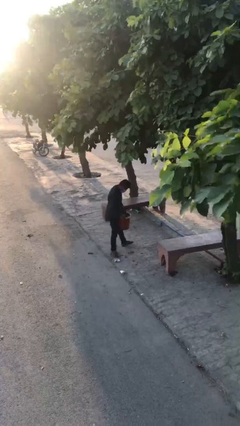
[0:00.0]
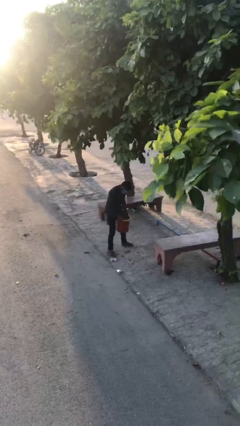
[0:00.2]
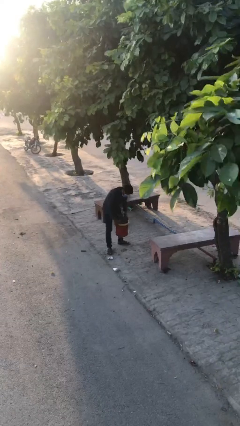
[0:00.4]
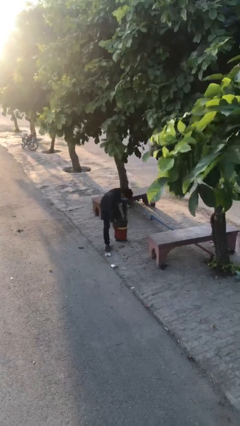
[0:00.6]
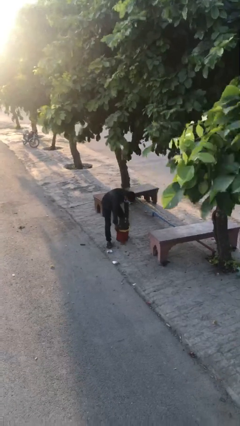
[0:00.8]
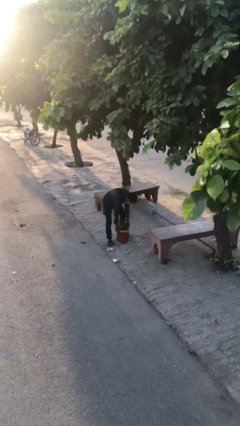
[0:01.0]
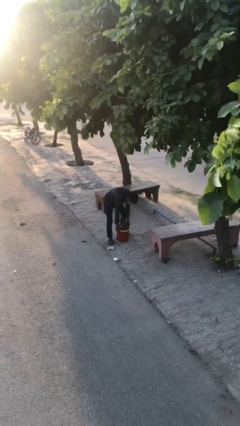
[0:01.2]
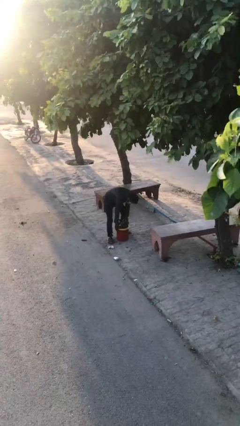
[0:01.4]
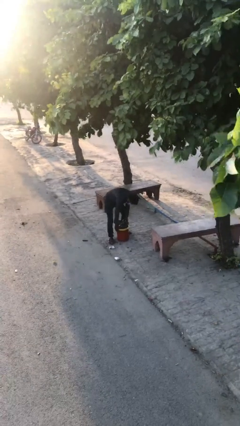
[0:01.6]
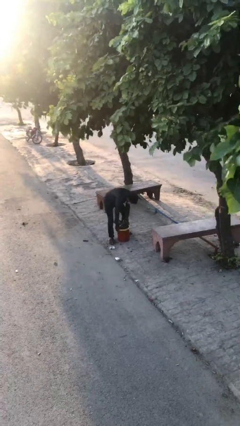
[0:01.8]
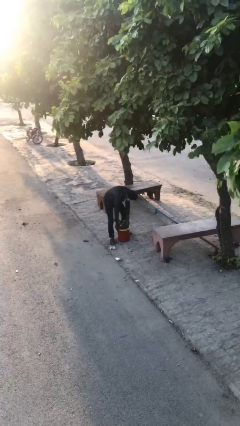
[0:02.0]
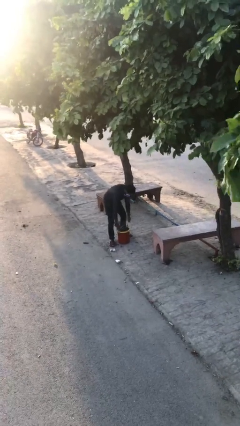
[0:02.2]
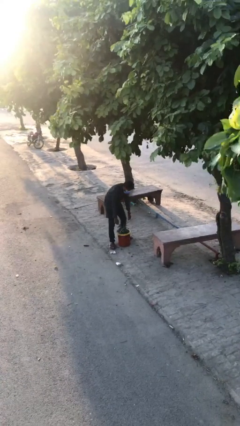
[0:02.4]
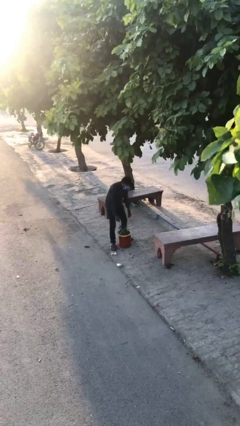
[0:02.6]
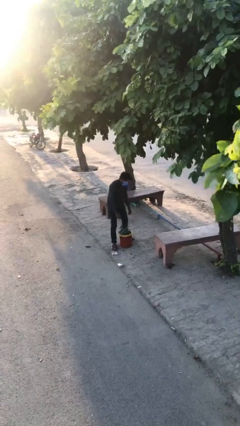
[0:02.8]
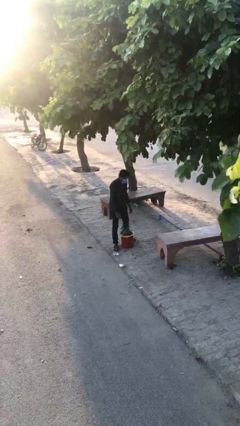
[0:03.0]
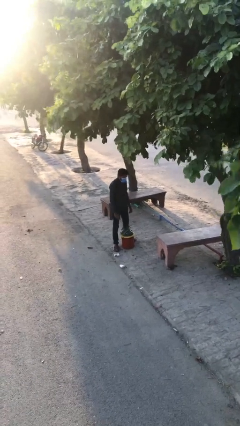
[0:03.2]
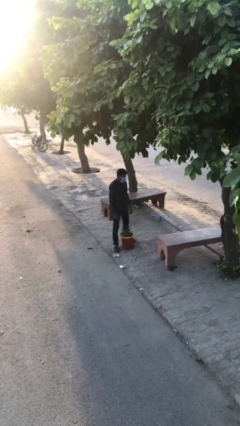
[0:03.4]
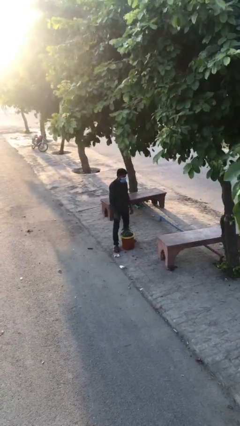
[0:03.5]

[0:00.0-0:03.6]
person puts down object on floor

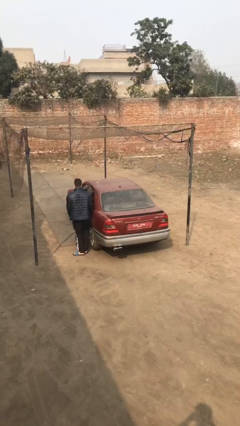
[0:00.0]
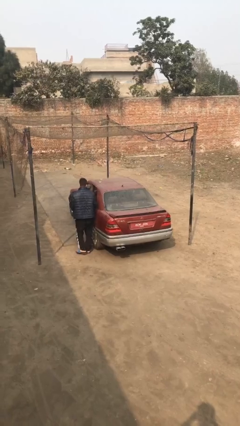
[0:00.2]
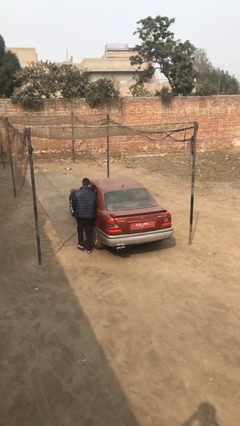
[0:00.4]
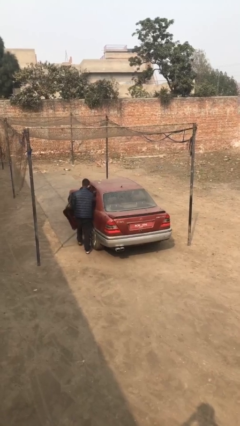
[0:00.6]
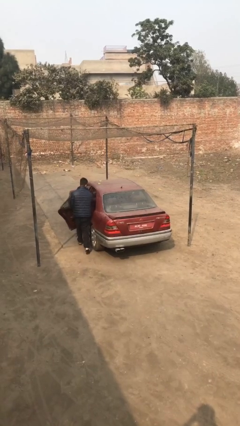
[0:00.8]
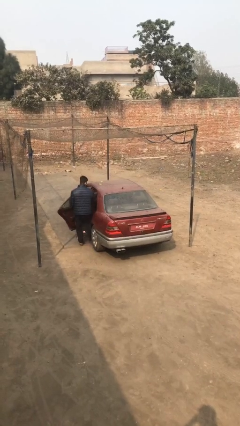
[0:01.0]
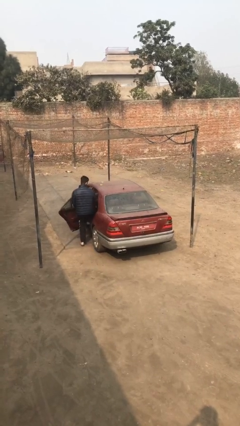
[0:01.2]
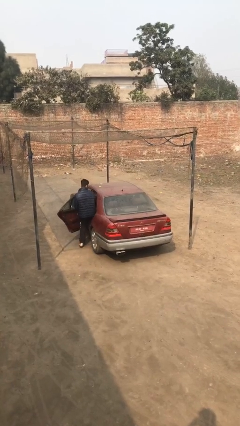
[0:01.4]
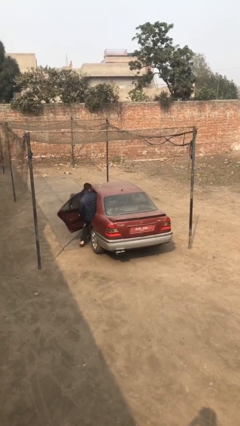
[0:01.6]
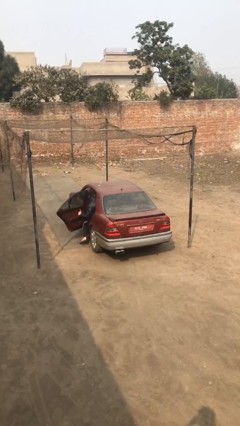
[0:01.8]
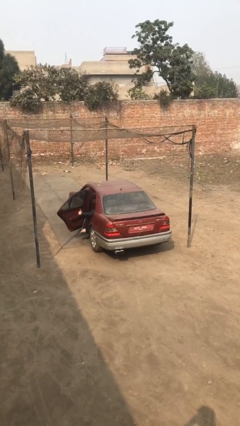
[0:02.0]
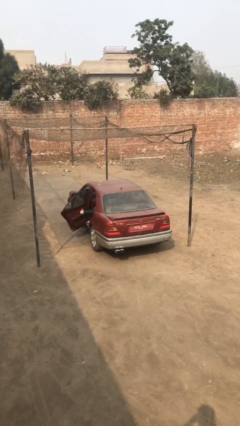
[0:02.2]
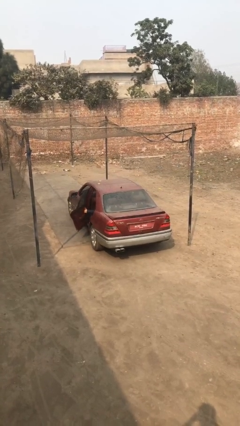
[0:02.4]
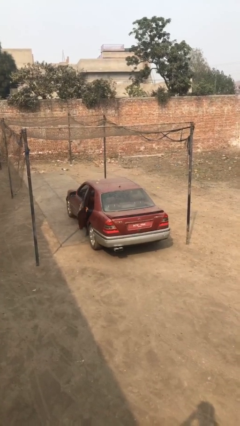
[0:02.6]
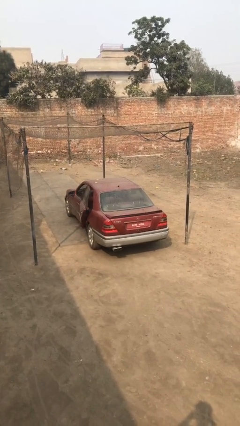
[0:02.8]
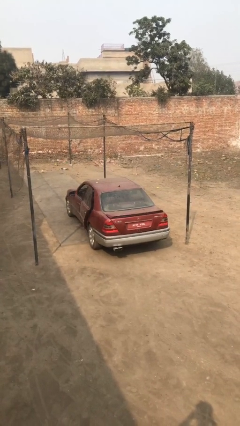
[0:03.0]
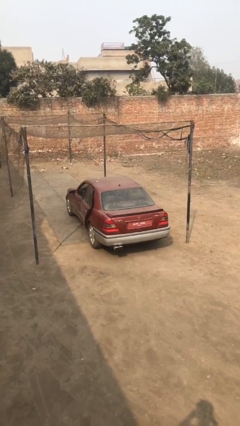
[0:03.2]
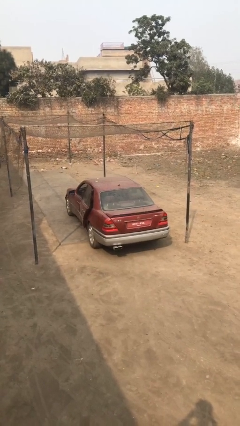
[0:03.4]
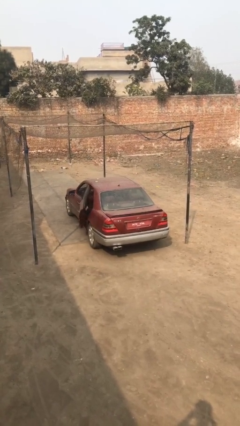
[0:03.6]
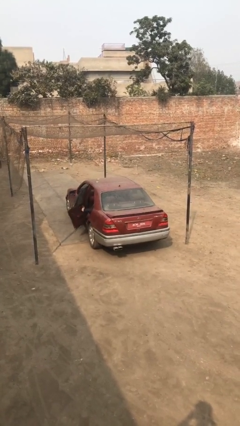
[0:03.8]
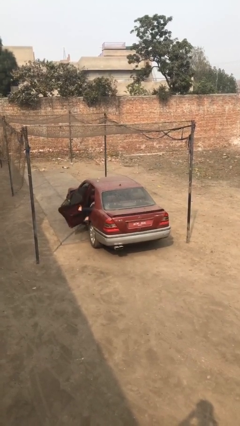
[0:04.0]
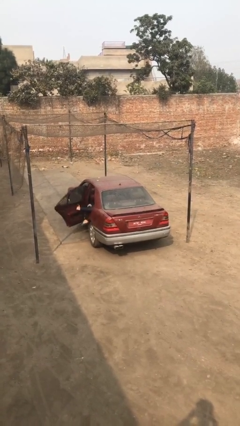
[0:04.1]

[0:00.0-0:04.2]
car picks up person

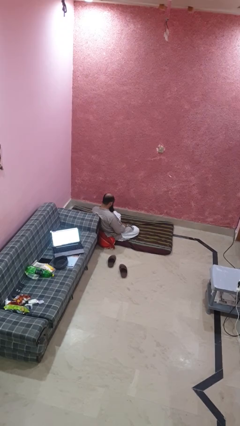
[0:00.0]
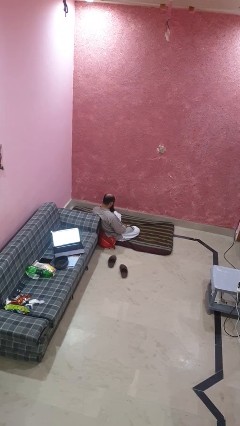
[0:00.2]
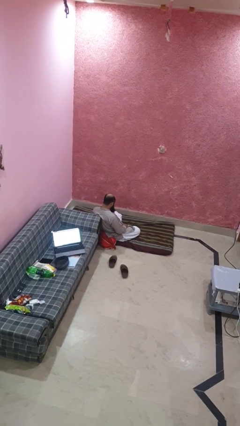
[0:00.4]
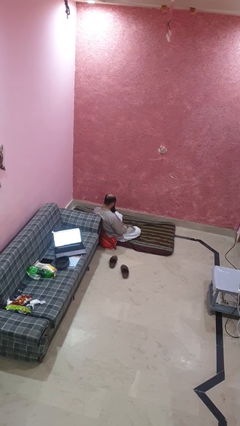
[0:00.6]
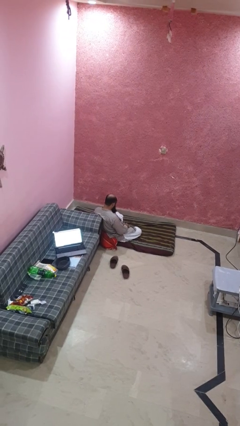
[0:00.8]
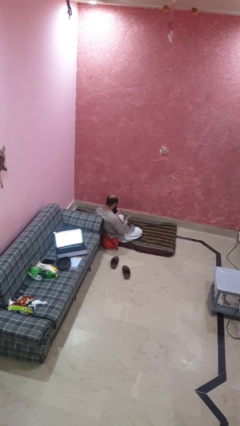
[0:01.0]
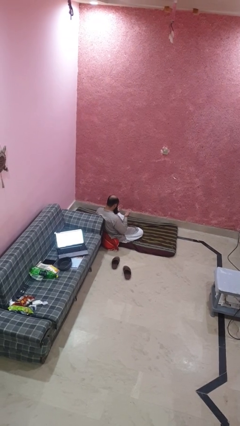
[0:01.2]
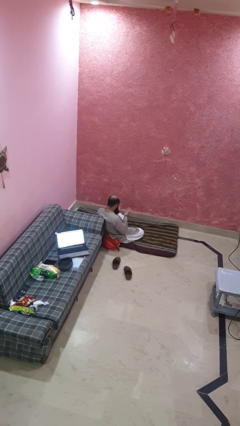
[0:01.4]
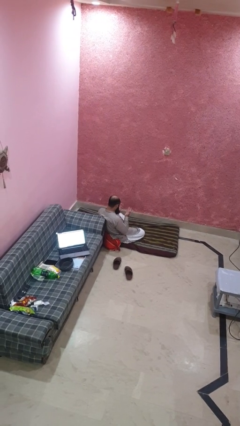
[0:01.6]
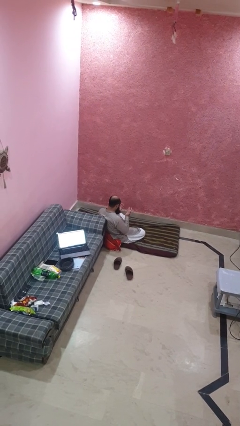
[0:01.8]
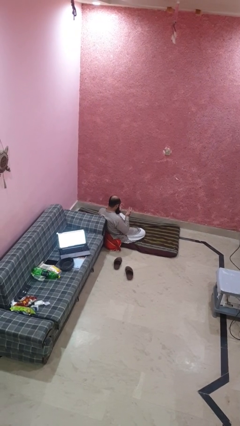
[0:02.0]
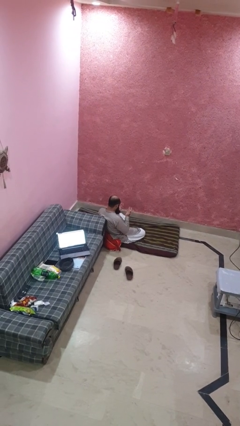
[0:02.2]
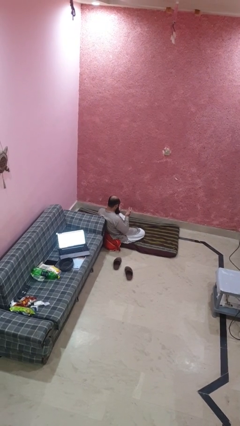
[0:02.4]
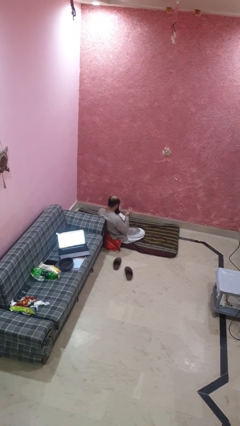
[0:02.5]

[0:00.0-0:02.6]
person looks at hands in lap

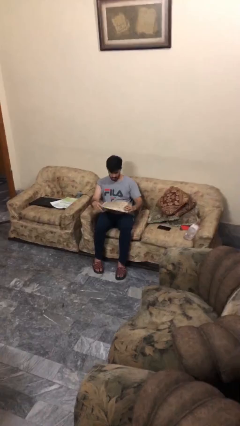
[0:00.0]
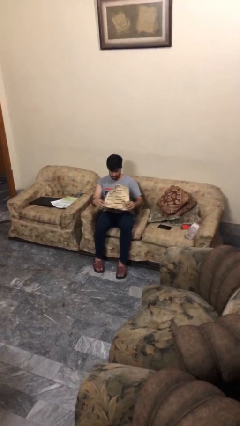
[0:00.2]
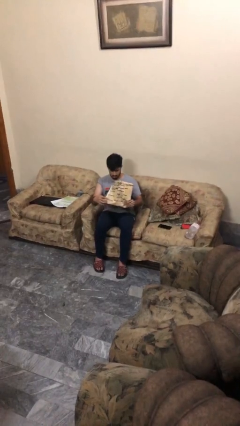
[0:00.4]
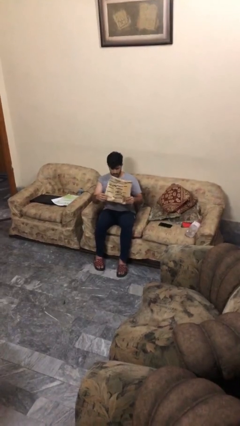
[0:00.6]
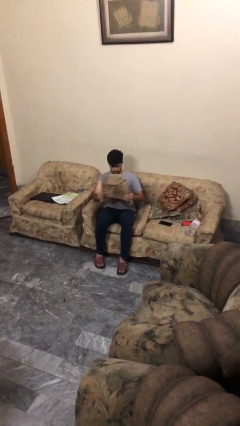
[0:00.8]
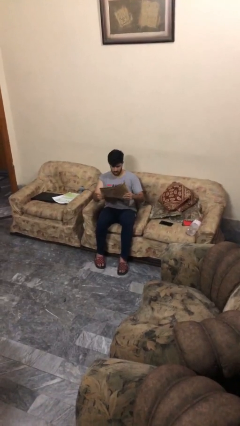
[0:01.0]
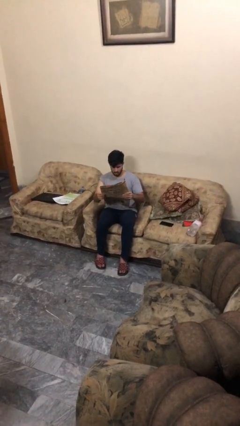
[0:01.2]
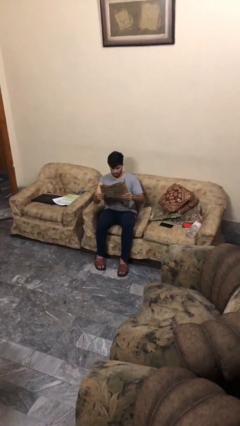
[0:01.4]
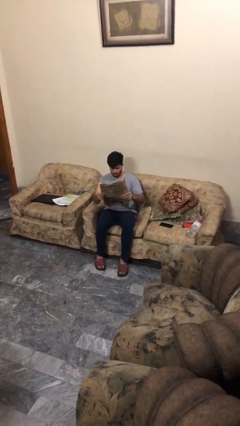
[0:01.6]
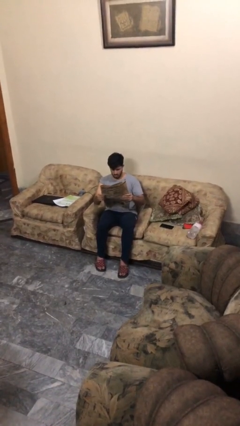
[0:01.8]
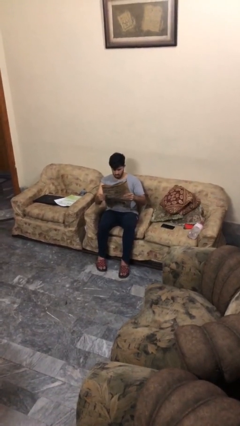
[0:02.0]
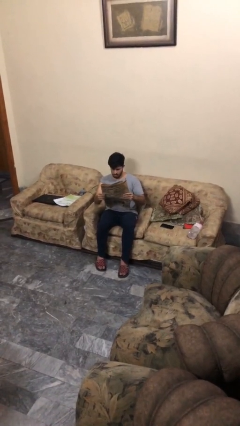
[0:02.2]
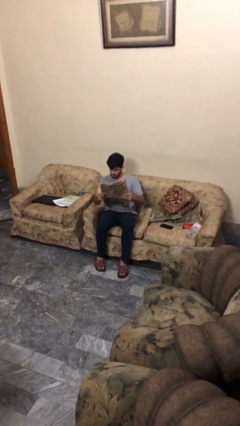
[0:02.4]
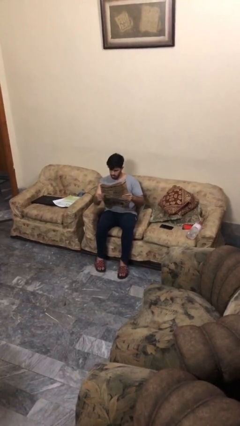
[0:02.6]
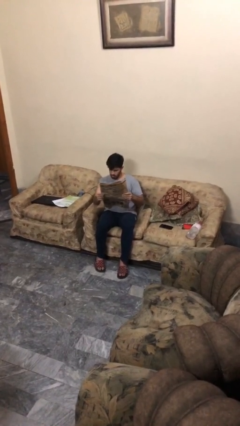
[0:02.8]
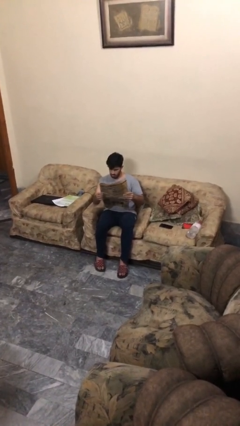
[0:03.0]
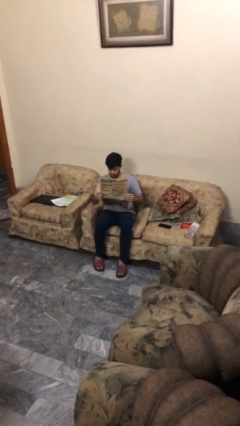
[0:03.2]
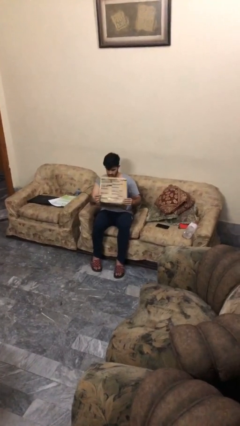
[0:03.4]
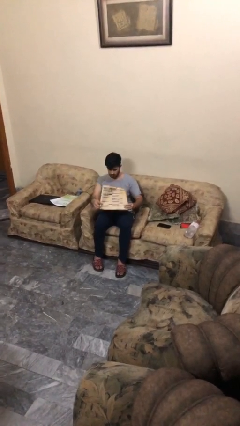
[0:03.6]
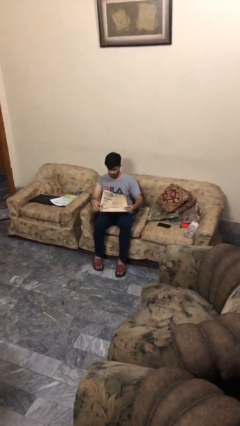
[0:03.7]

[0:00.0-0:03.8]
person reads newspaper

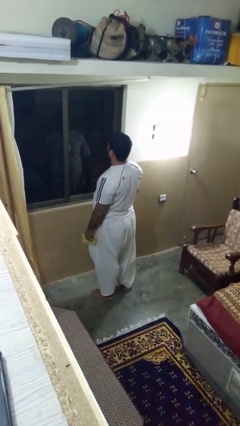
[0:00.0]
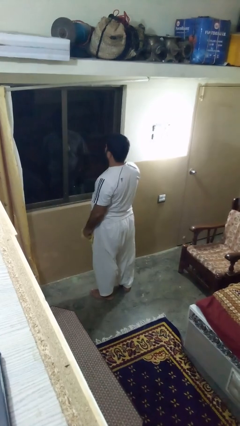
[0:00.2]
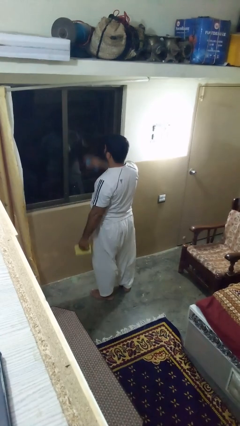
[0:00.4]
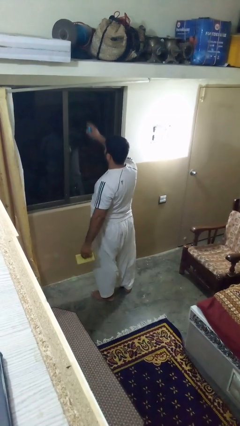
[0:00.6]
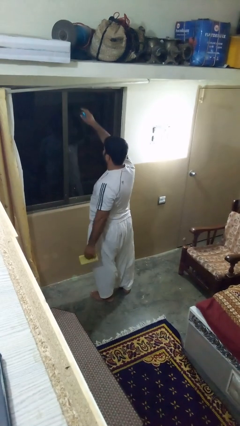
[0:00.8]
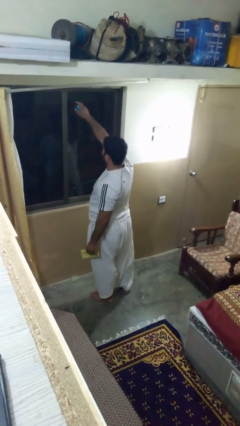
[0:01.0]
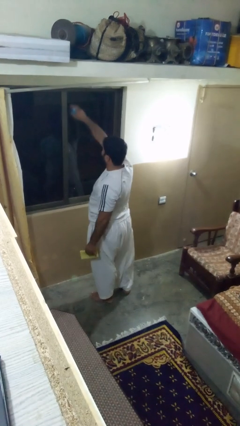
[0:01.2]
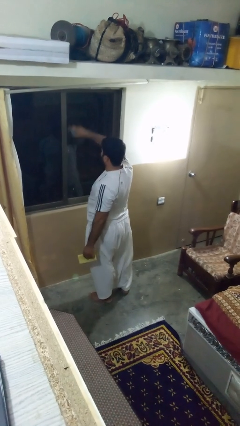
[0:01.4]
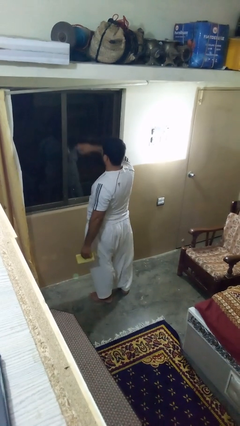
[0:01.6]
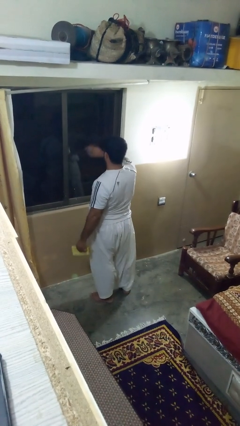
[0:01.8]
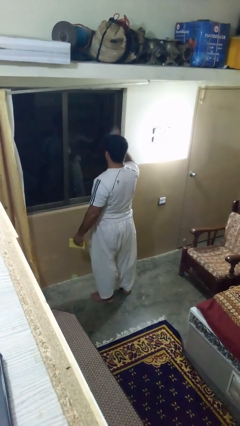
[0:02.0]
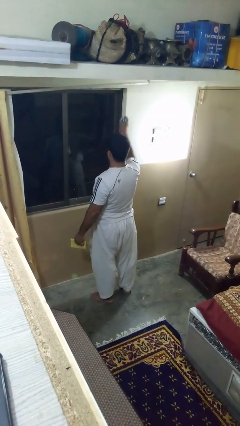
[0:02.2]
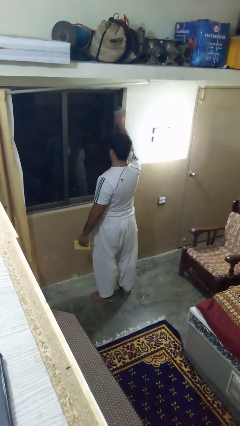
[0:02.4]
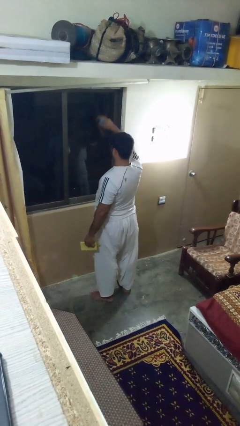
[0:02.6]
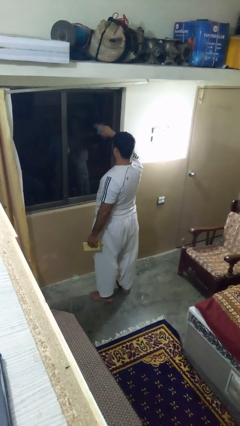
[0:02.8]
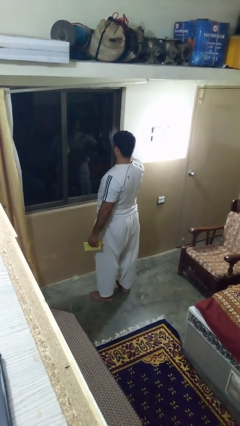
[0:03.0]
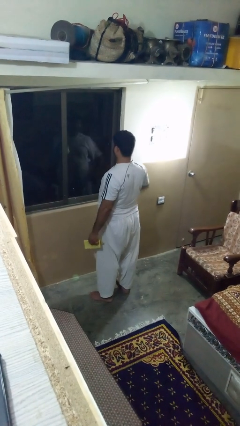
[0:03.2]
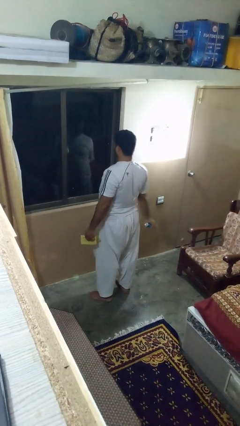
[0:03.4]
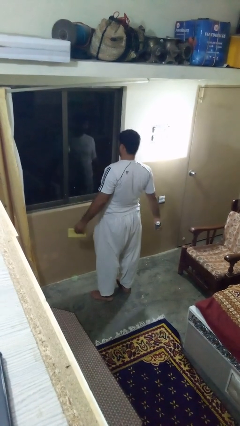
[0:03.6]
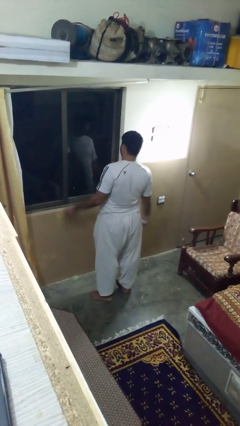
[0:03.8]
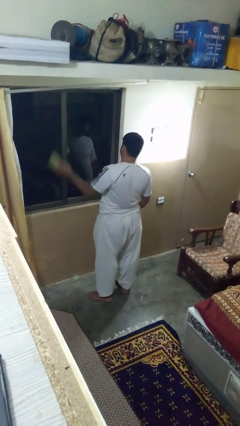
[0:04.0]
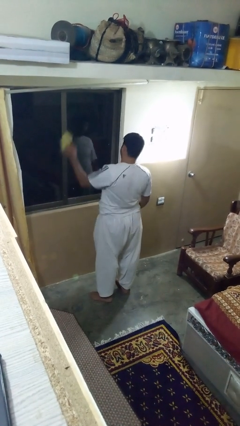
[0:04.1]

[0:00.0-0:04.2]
person sprays from bottle
